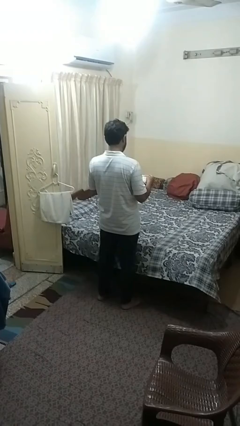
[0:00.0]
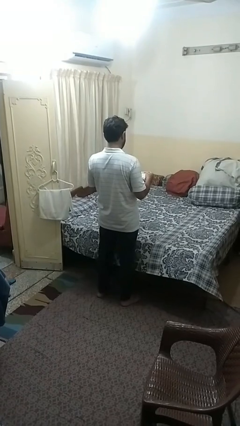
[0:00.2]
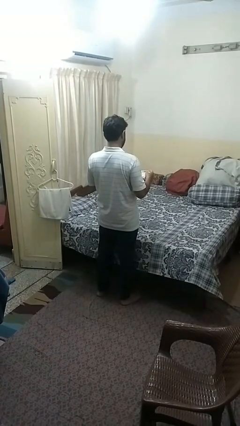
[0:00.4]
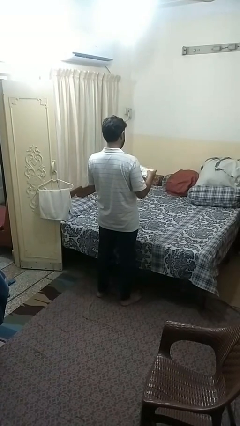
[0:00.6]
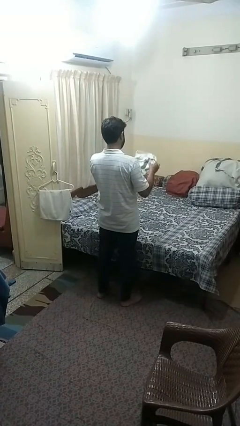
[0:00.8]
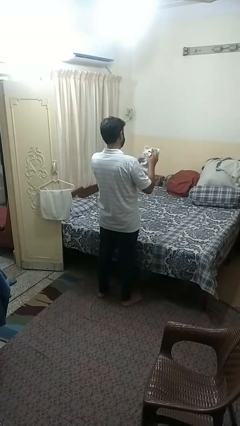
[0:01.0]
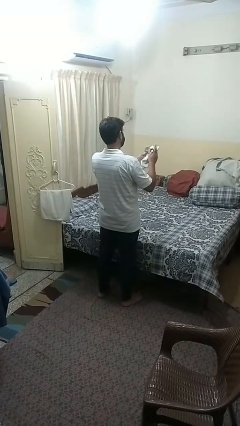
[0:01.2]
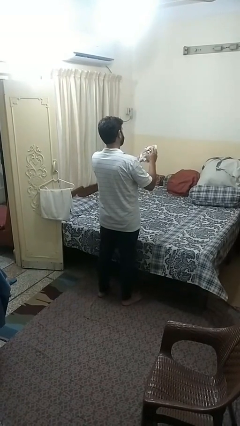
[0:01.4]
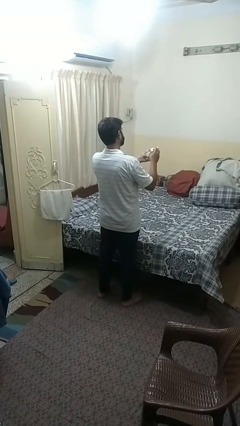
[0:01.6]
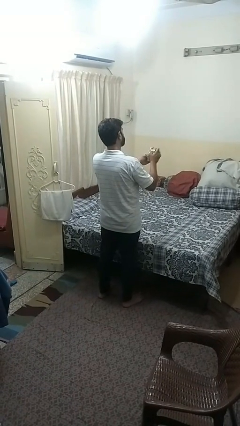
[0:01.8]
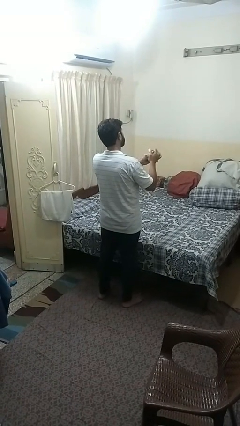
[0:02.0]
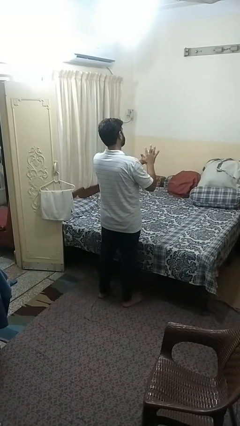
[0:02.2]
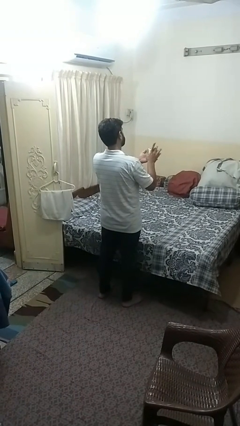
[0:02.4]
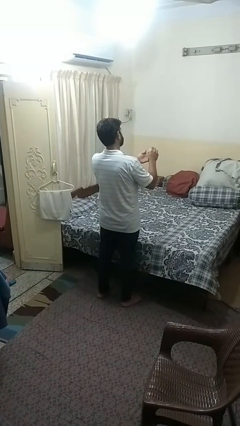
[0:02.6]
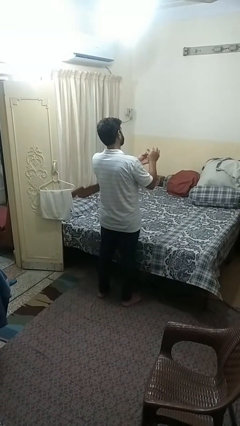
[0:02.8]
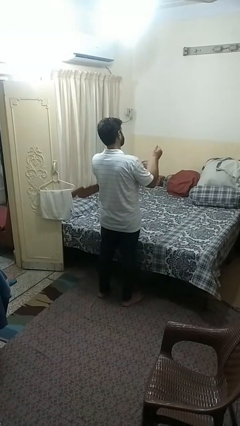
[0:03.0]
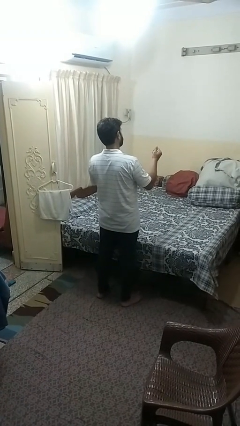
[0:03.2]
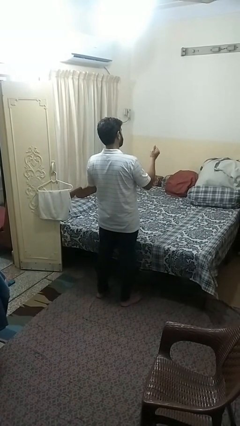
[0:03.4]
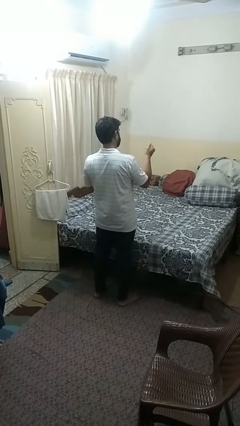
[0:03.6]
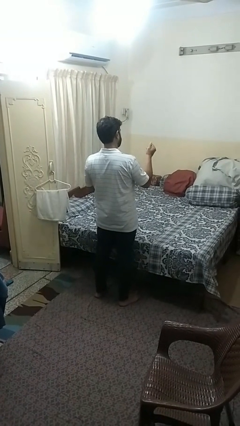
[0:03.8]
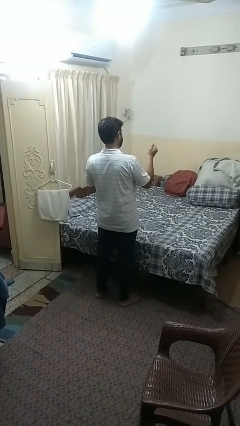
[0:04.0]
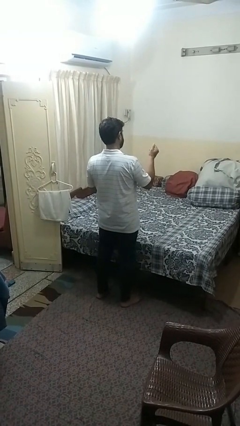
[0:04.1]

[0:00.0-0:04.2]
person crumples paper

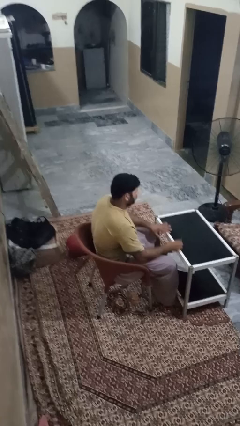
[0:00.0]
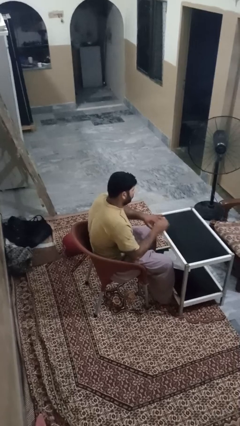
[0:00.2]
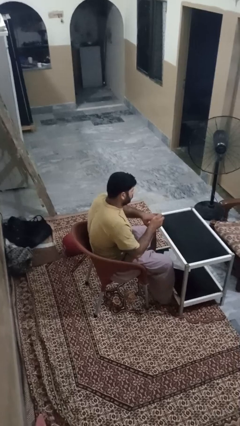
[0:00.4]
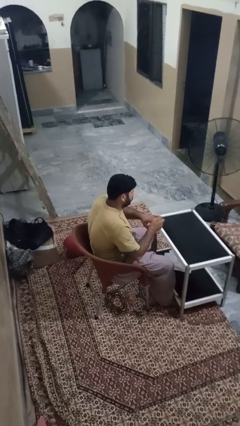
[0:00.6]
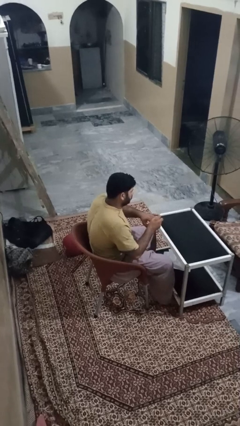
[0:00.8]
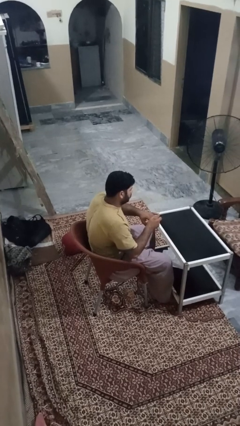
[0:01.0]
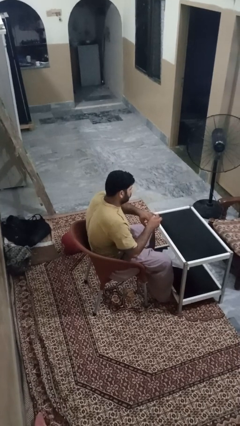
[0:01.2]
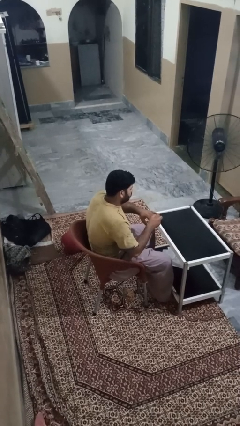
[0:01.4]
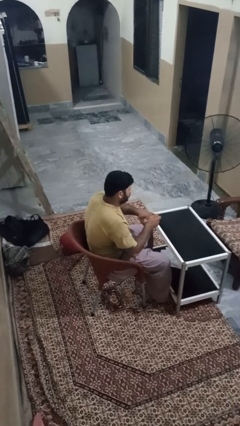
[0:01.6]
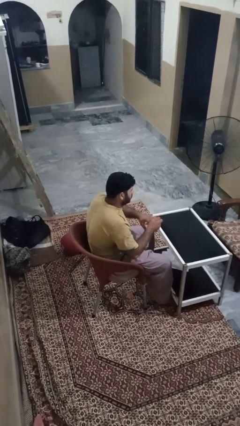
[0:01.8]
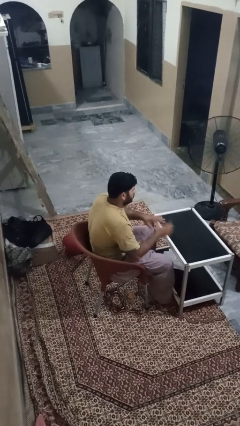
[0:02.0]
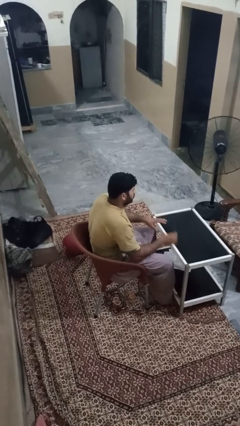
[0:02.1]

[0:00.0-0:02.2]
person files fingernails

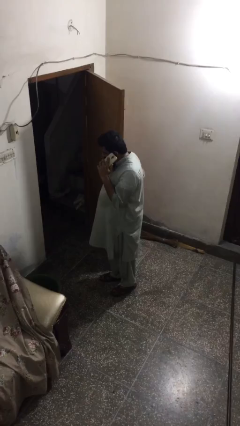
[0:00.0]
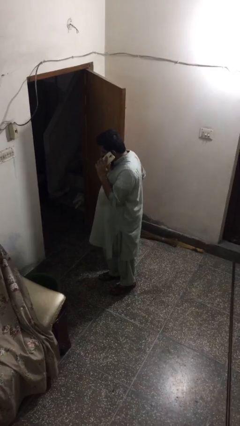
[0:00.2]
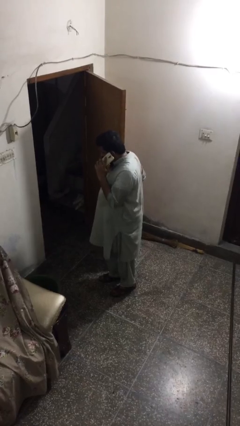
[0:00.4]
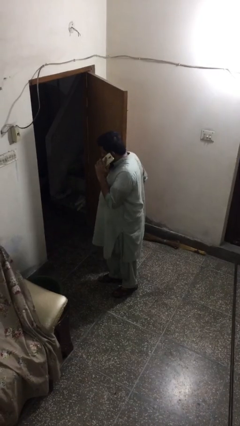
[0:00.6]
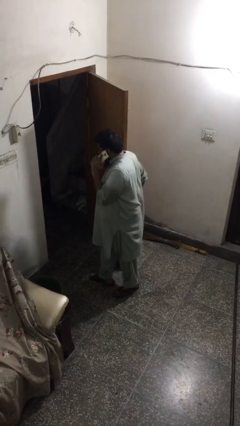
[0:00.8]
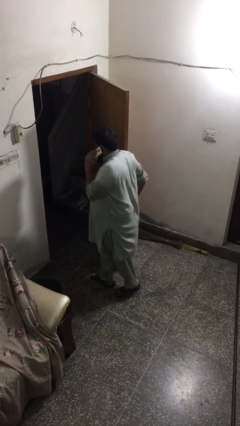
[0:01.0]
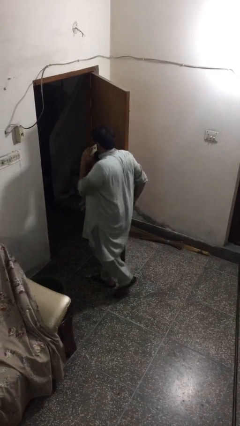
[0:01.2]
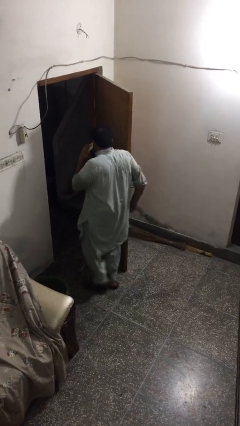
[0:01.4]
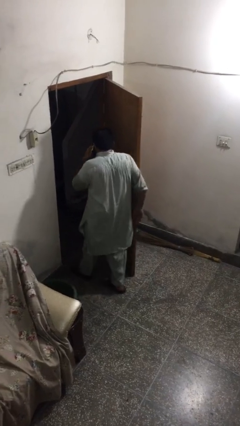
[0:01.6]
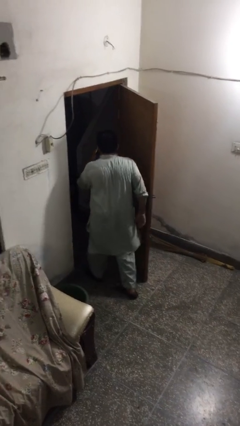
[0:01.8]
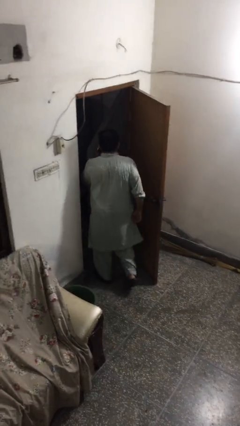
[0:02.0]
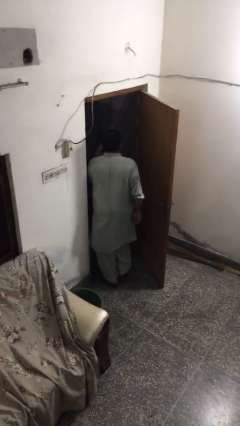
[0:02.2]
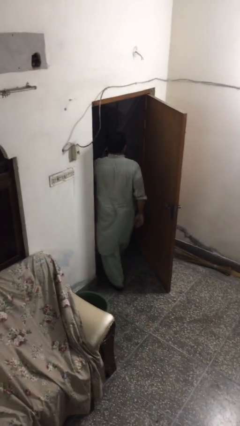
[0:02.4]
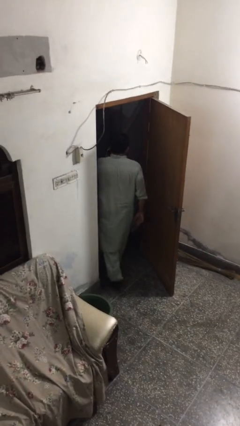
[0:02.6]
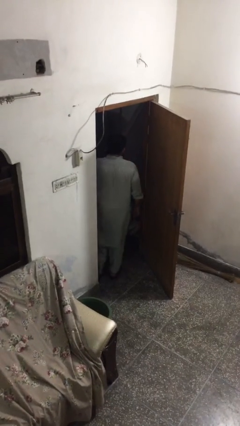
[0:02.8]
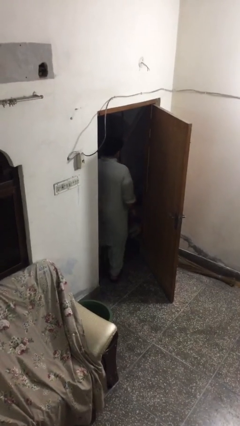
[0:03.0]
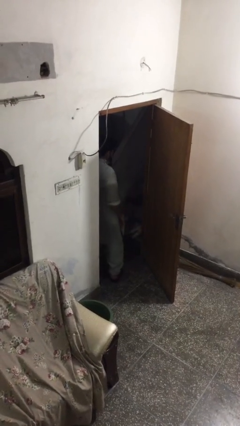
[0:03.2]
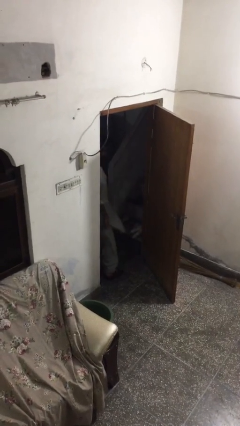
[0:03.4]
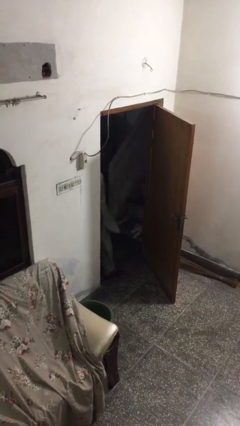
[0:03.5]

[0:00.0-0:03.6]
person exits scene through structure

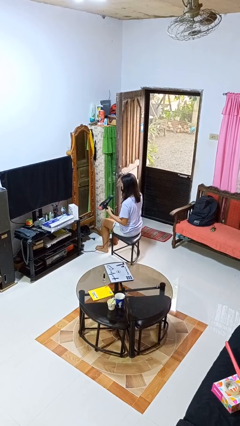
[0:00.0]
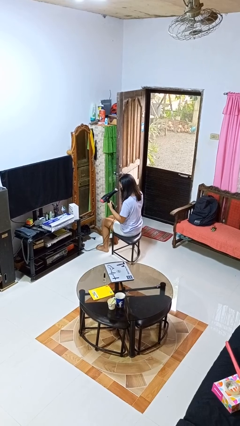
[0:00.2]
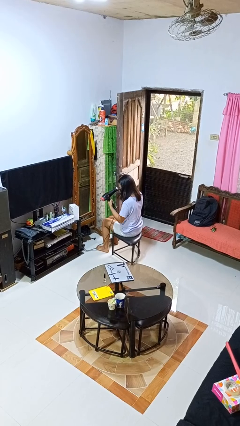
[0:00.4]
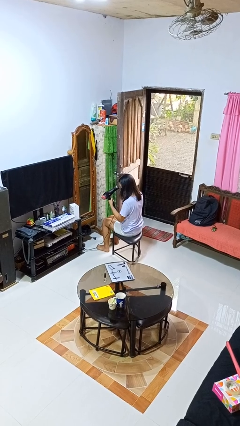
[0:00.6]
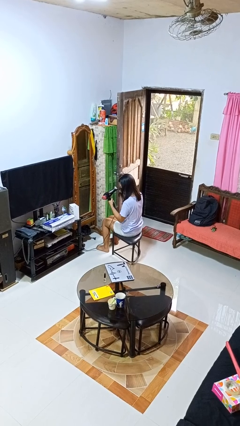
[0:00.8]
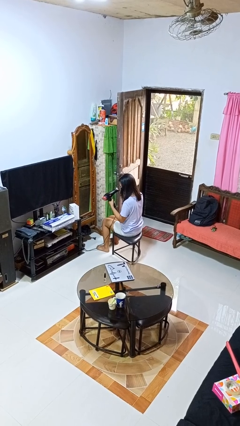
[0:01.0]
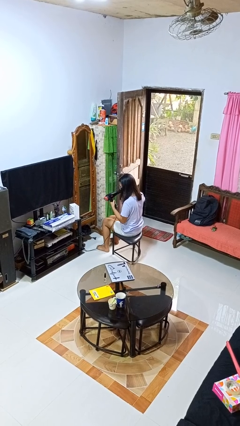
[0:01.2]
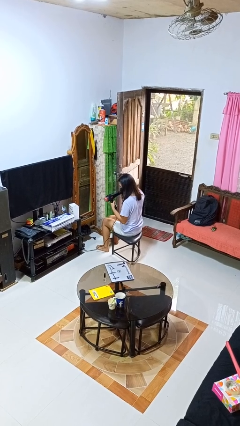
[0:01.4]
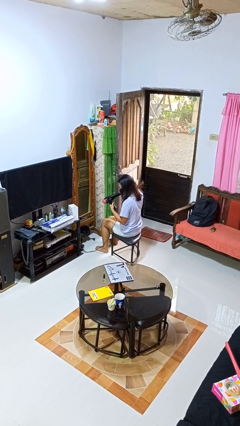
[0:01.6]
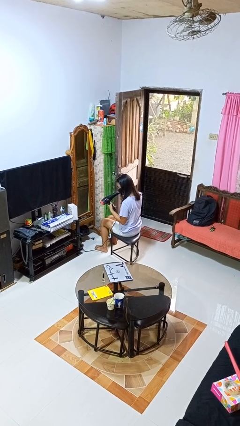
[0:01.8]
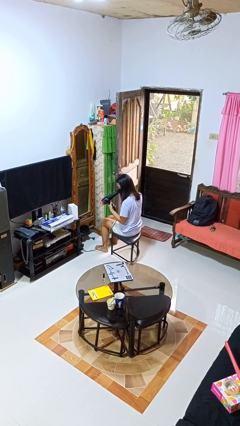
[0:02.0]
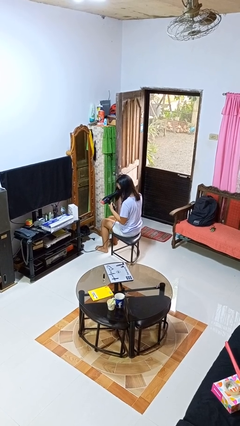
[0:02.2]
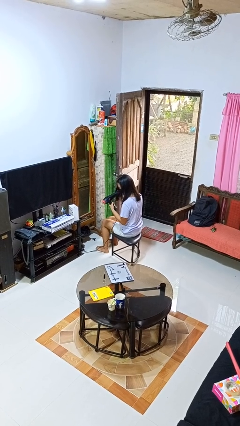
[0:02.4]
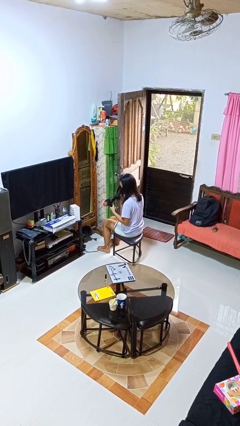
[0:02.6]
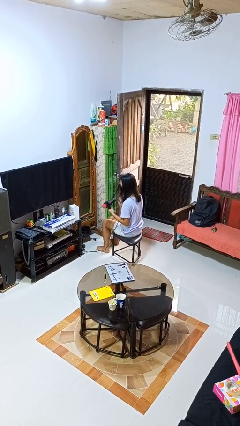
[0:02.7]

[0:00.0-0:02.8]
person dries hair with hairdryer

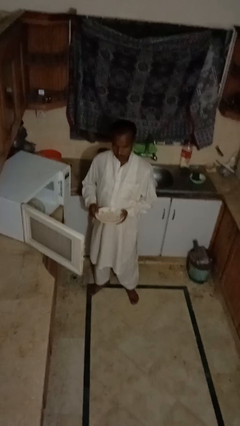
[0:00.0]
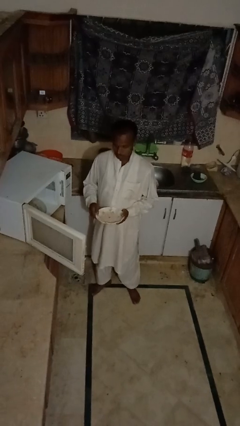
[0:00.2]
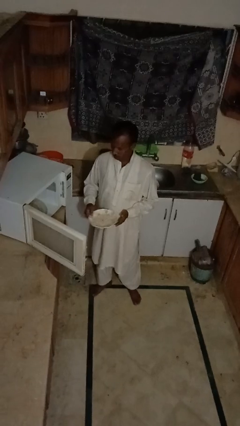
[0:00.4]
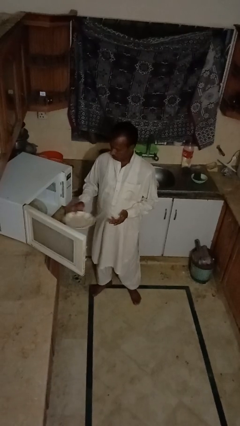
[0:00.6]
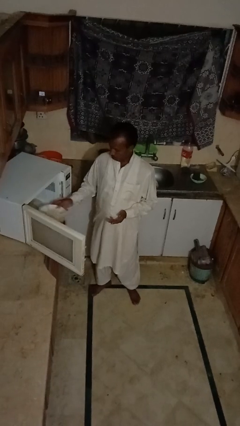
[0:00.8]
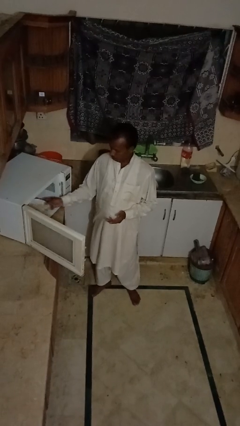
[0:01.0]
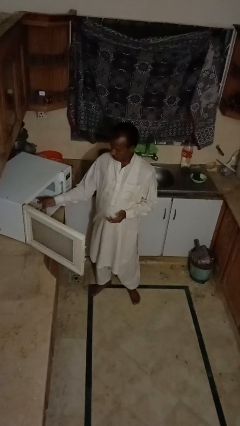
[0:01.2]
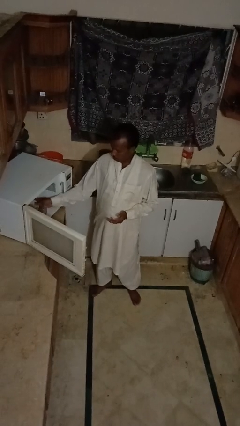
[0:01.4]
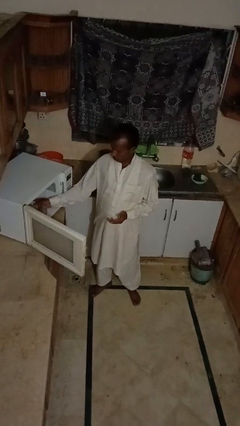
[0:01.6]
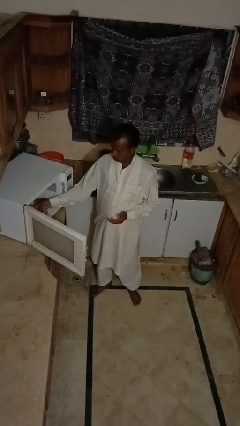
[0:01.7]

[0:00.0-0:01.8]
person puts object into microwave

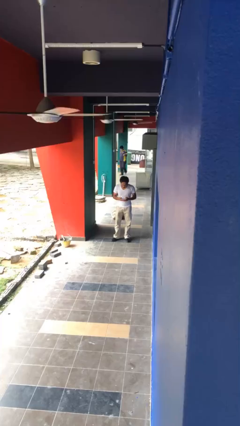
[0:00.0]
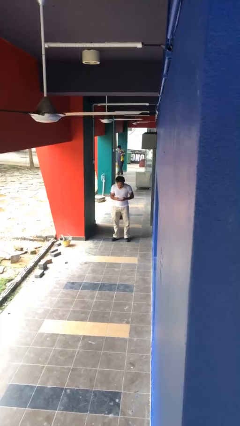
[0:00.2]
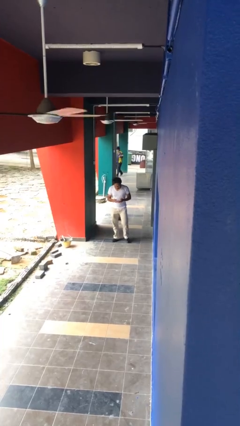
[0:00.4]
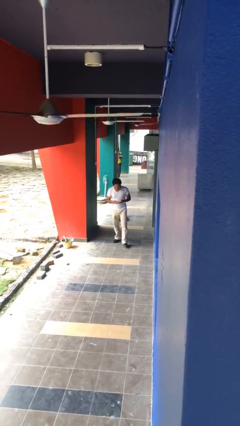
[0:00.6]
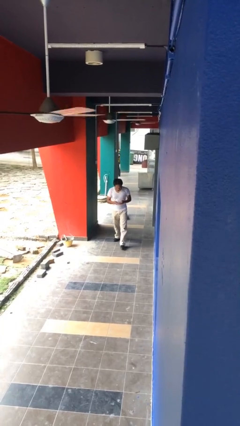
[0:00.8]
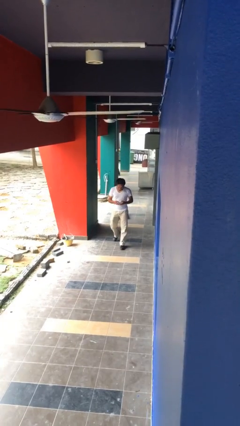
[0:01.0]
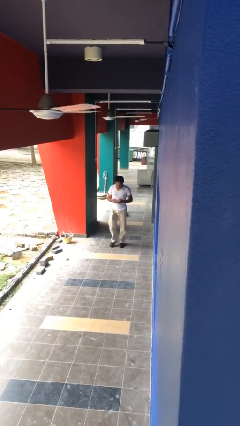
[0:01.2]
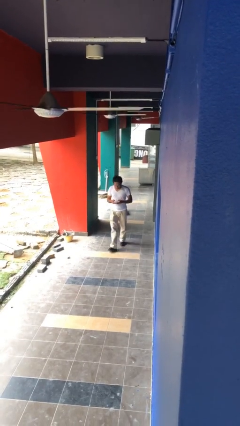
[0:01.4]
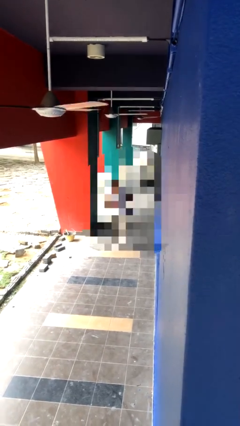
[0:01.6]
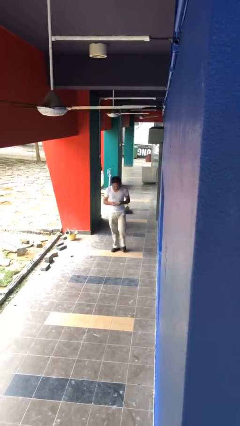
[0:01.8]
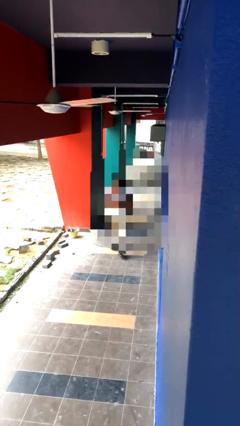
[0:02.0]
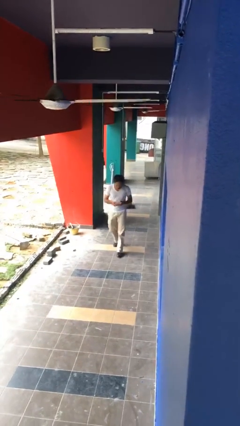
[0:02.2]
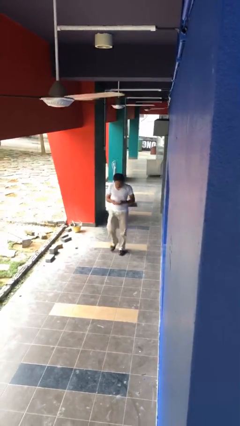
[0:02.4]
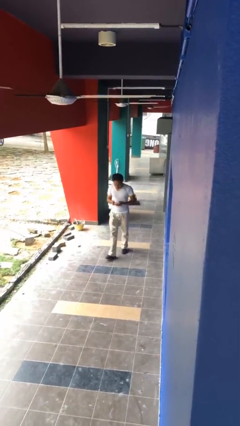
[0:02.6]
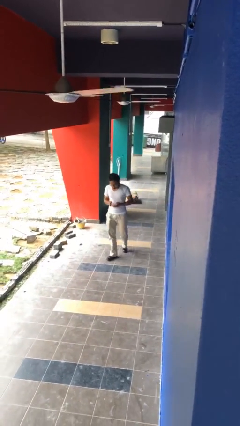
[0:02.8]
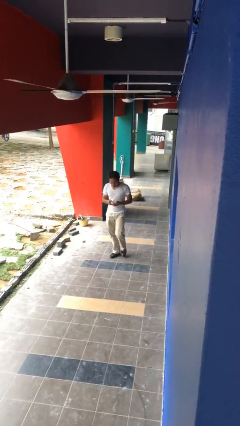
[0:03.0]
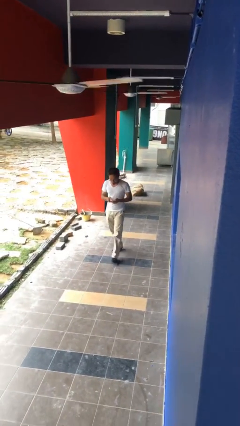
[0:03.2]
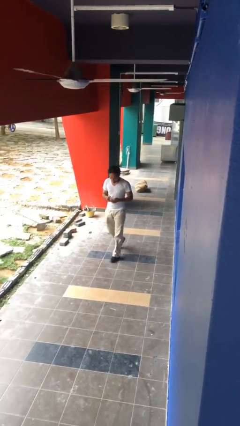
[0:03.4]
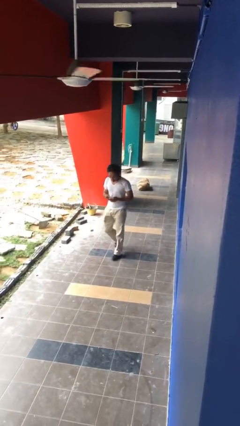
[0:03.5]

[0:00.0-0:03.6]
person texts on phone
